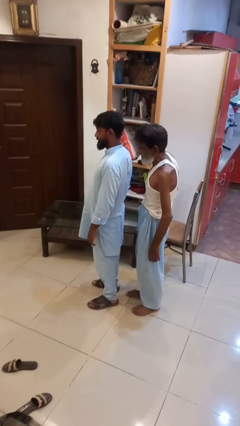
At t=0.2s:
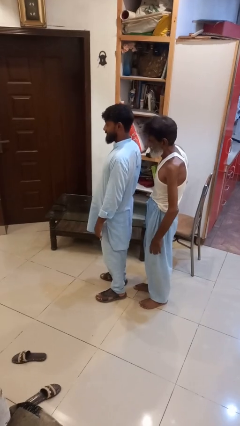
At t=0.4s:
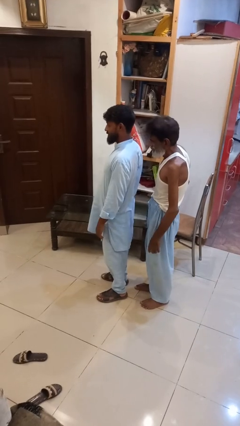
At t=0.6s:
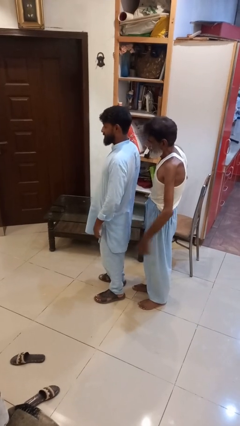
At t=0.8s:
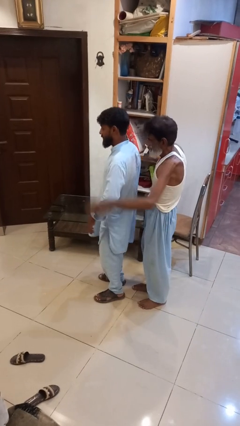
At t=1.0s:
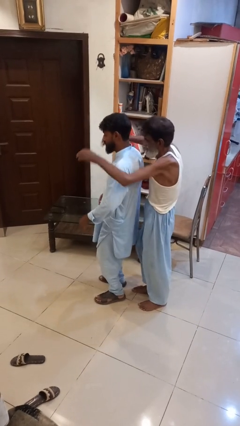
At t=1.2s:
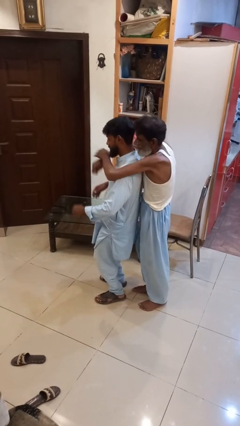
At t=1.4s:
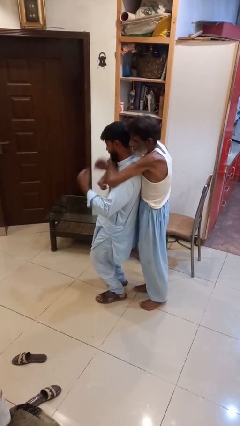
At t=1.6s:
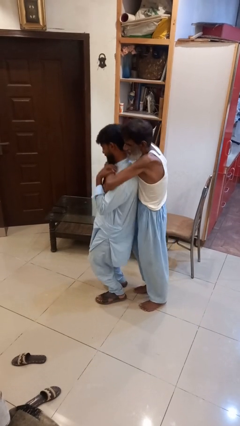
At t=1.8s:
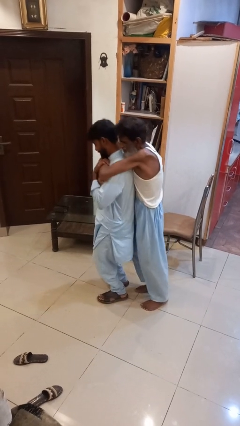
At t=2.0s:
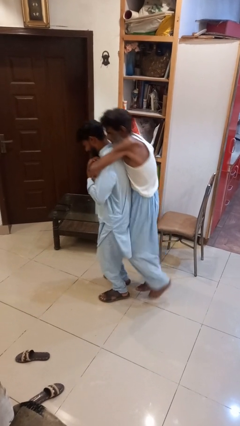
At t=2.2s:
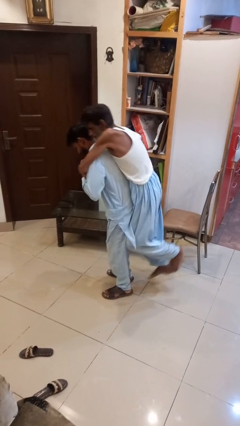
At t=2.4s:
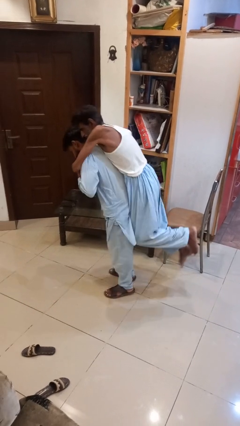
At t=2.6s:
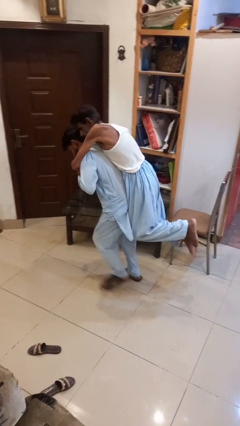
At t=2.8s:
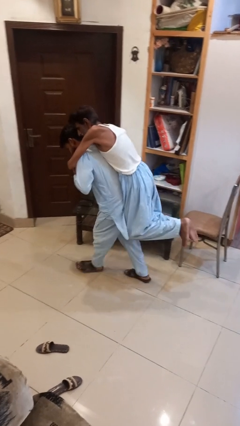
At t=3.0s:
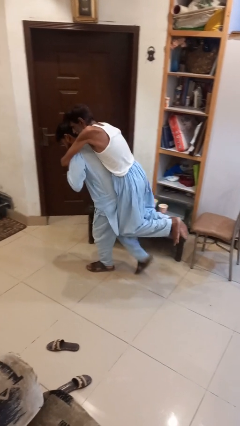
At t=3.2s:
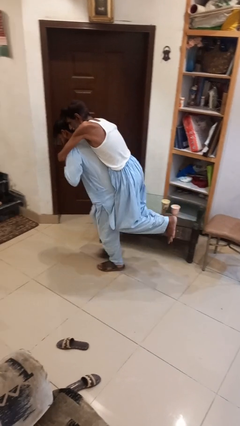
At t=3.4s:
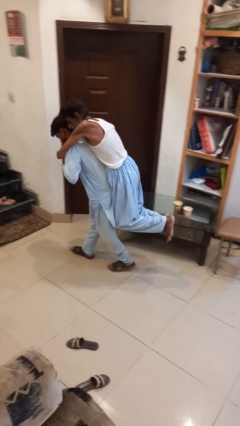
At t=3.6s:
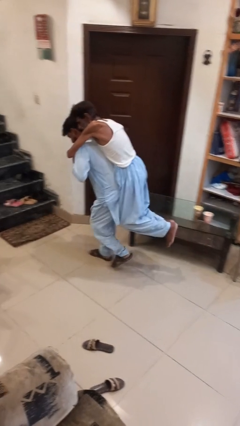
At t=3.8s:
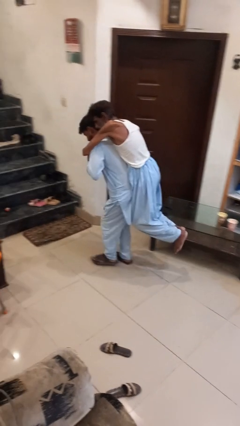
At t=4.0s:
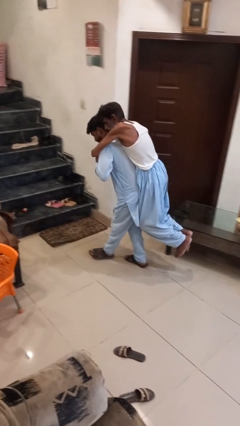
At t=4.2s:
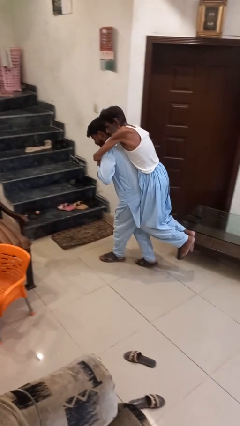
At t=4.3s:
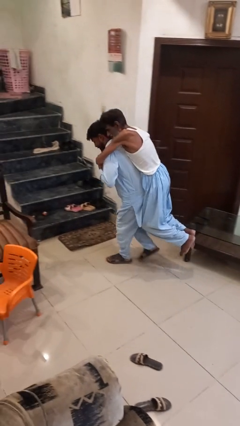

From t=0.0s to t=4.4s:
person carries person over shoulder

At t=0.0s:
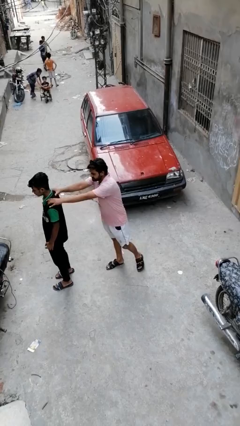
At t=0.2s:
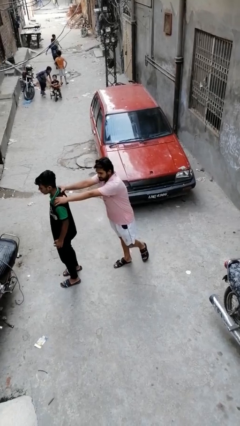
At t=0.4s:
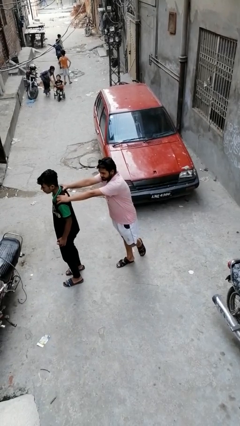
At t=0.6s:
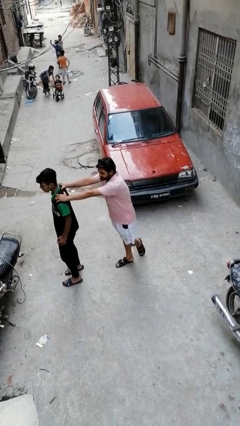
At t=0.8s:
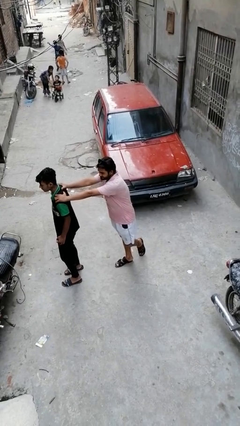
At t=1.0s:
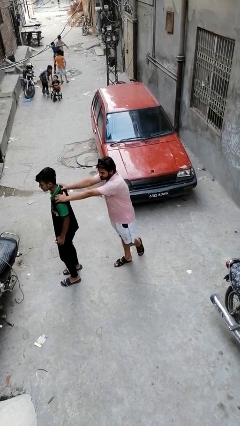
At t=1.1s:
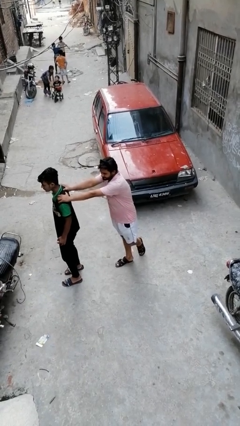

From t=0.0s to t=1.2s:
person grabs person by shoulder

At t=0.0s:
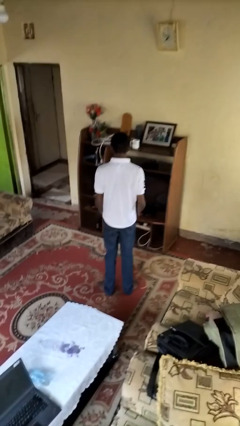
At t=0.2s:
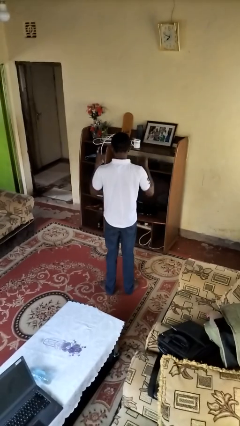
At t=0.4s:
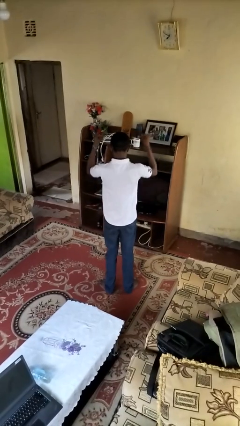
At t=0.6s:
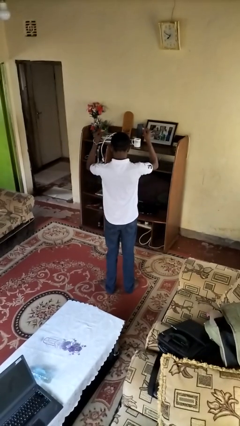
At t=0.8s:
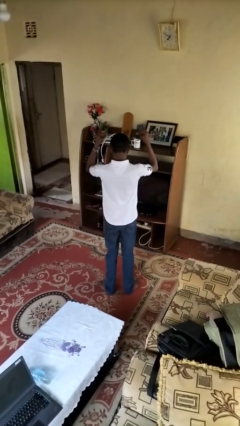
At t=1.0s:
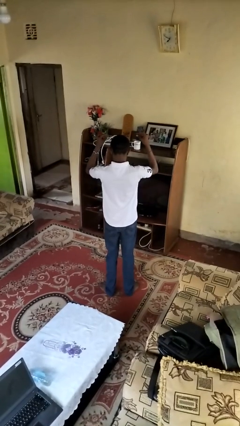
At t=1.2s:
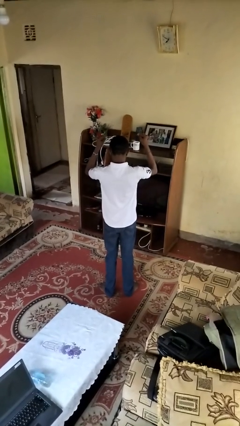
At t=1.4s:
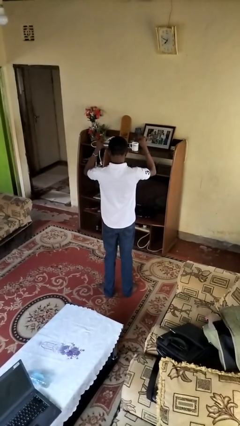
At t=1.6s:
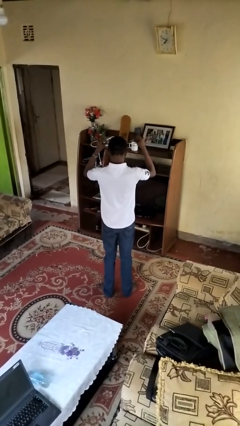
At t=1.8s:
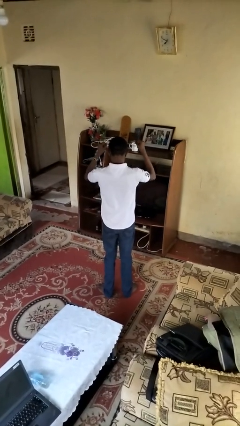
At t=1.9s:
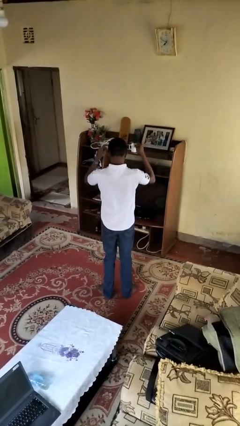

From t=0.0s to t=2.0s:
person snaps fingers

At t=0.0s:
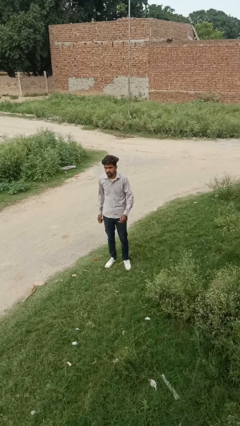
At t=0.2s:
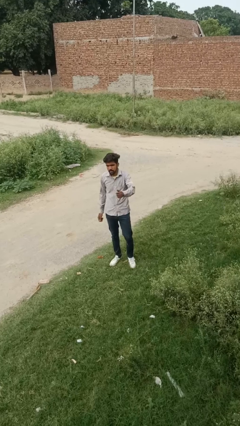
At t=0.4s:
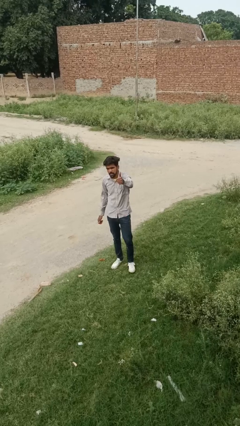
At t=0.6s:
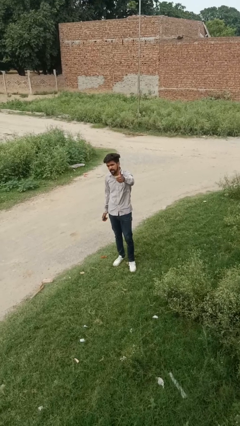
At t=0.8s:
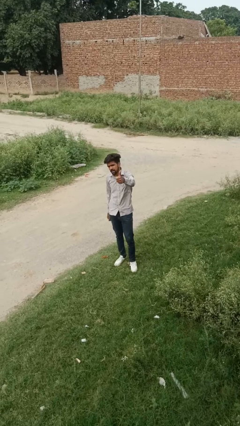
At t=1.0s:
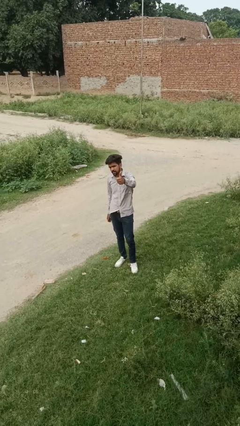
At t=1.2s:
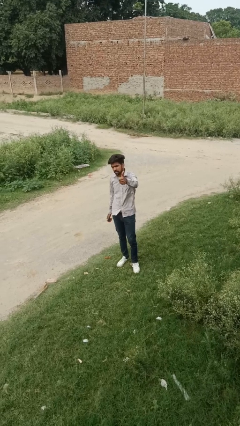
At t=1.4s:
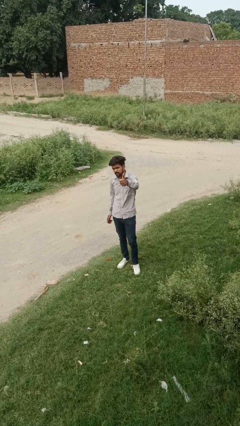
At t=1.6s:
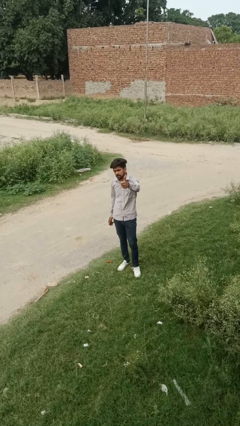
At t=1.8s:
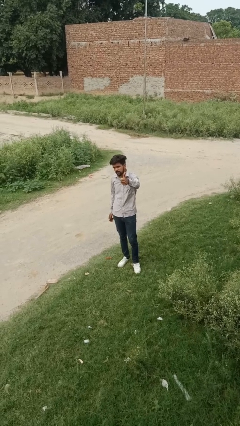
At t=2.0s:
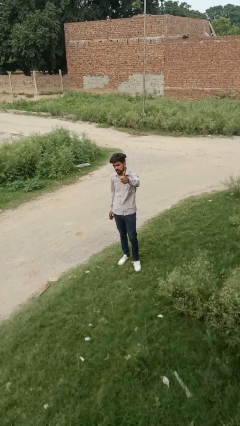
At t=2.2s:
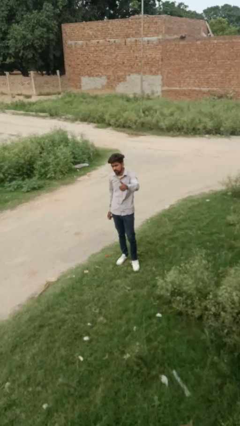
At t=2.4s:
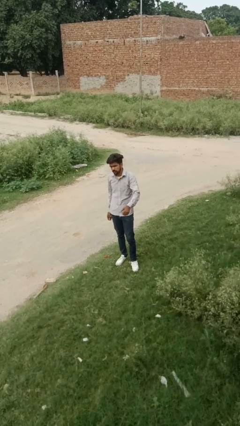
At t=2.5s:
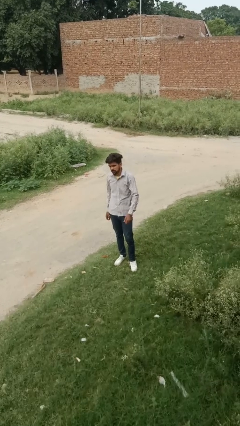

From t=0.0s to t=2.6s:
person gestures thumbs up

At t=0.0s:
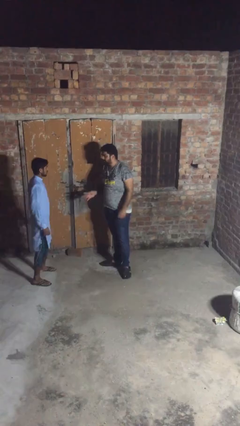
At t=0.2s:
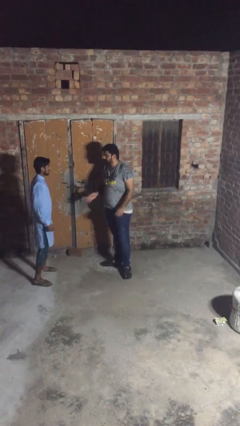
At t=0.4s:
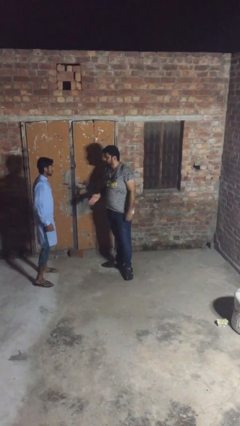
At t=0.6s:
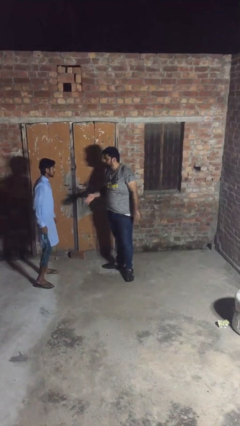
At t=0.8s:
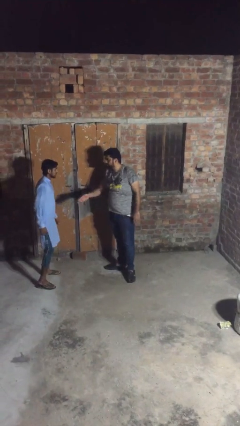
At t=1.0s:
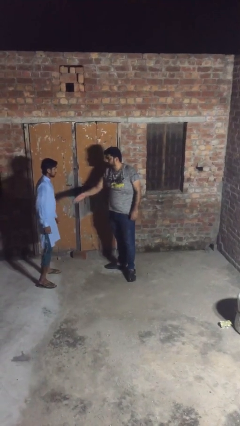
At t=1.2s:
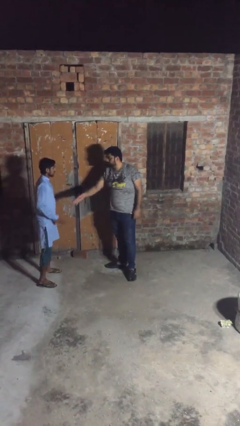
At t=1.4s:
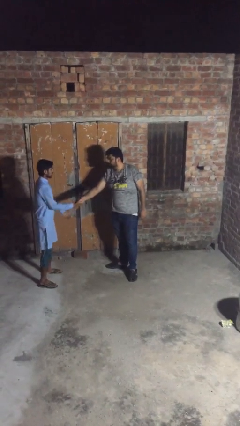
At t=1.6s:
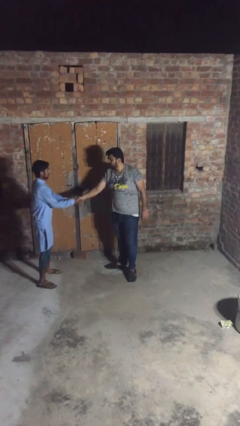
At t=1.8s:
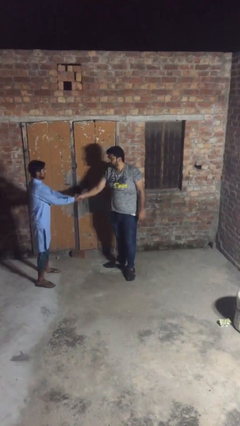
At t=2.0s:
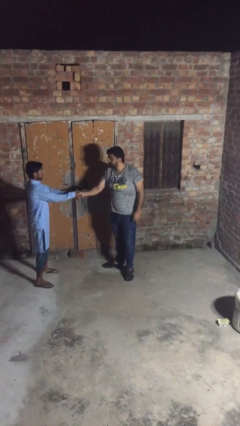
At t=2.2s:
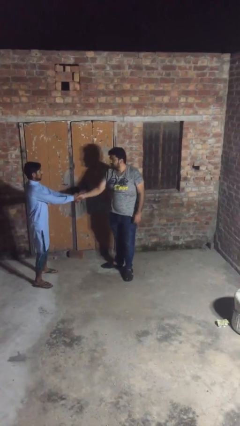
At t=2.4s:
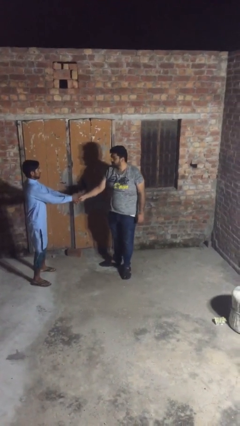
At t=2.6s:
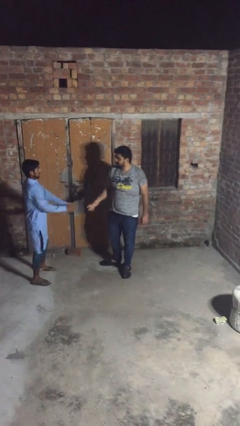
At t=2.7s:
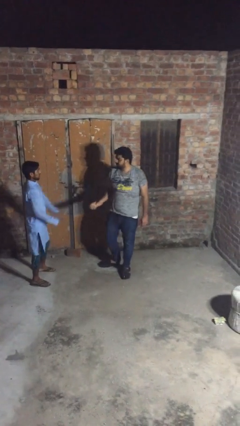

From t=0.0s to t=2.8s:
person shakes hand

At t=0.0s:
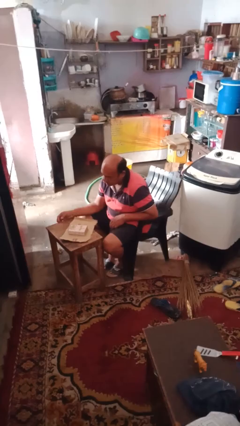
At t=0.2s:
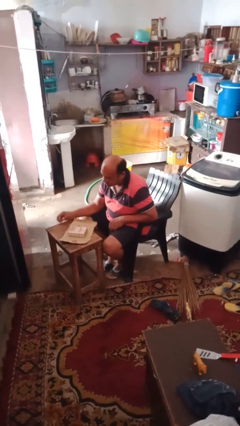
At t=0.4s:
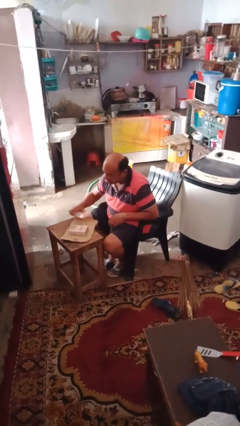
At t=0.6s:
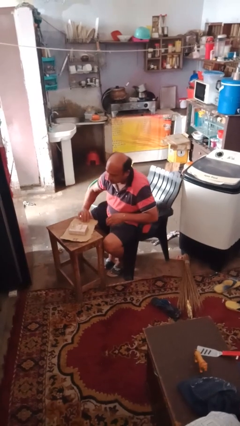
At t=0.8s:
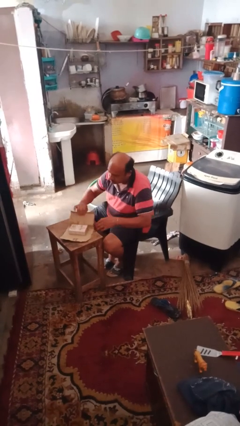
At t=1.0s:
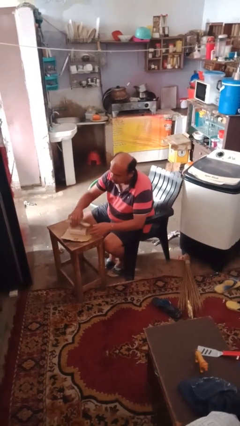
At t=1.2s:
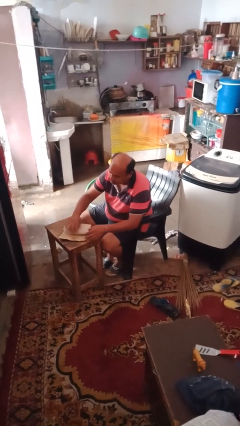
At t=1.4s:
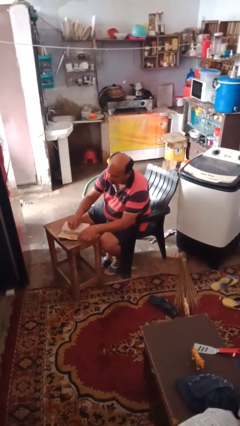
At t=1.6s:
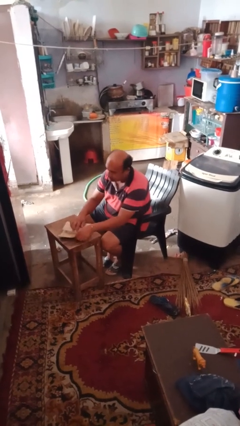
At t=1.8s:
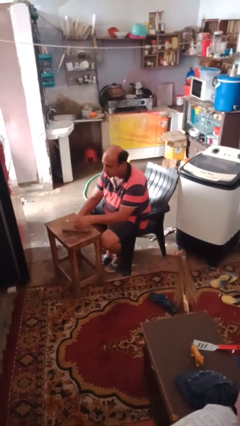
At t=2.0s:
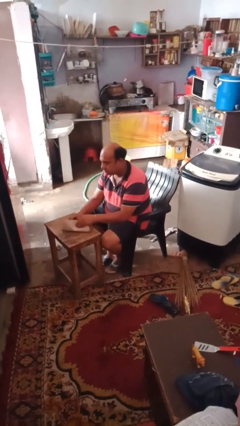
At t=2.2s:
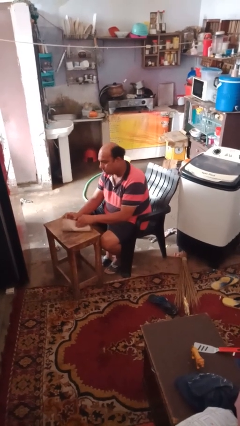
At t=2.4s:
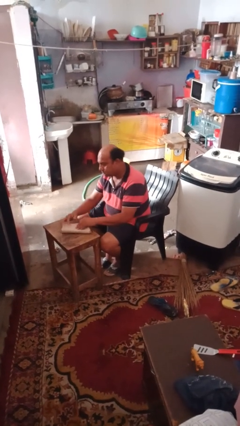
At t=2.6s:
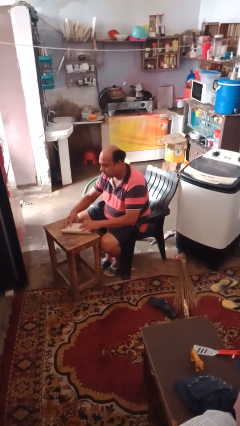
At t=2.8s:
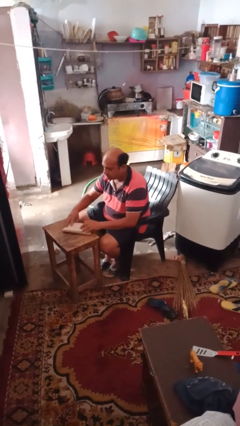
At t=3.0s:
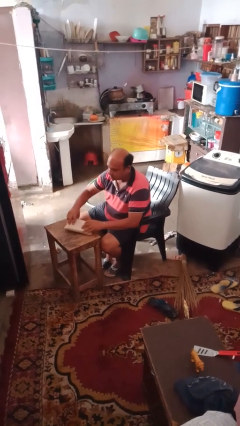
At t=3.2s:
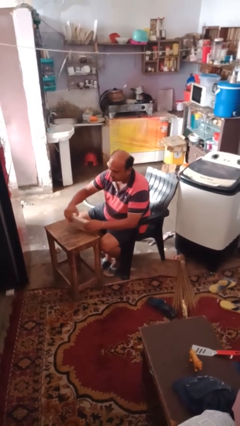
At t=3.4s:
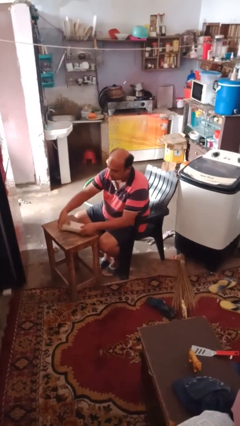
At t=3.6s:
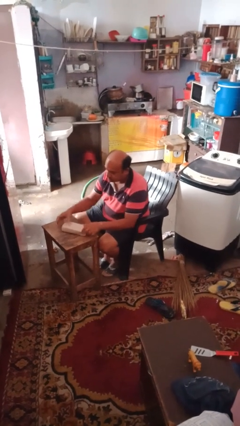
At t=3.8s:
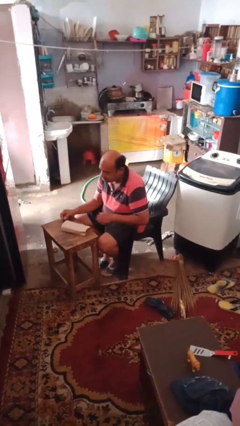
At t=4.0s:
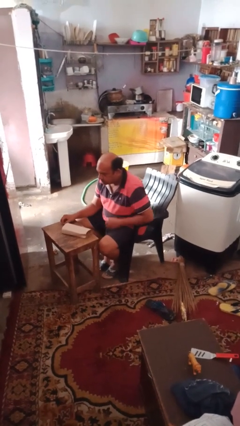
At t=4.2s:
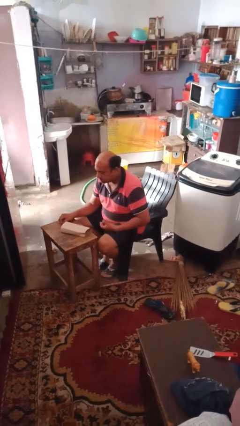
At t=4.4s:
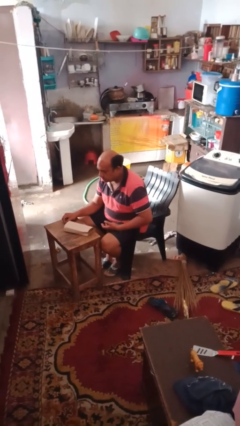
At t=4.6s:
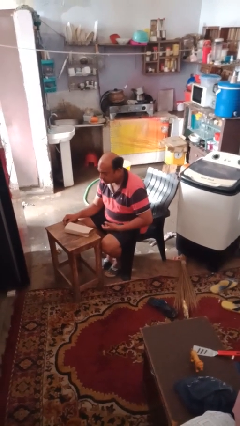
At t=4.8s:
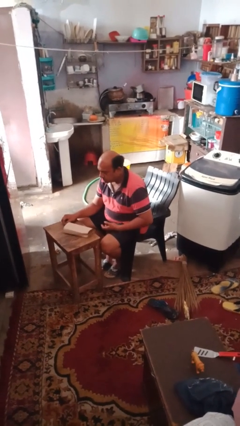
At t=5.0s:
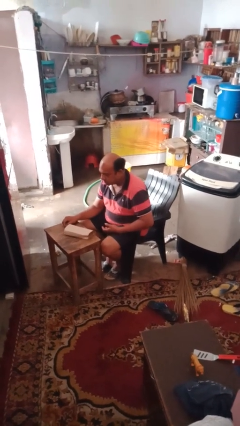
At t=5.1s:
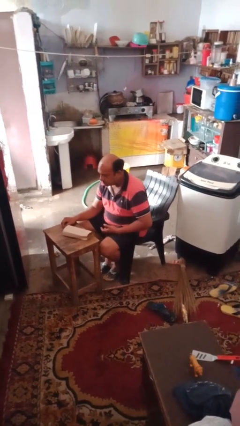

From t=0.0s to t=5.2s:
person wraps box
